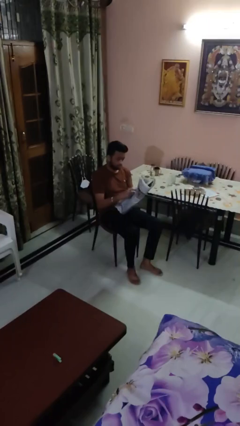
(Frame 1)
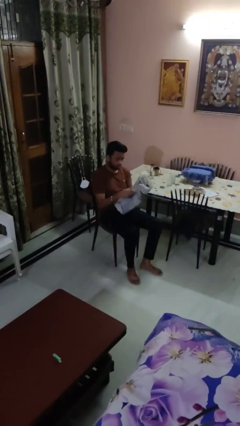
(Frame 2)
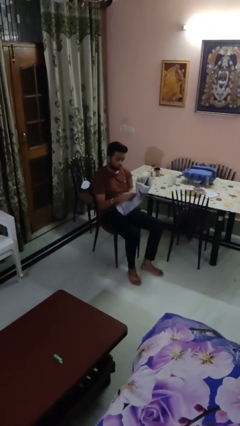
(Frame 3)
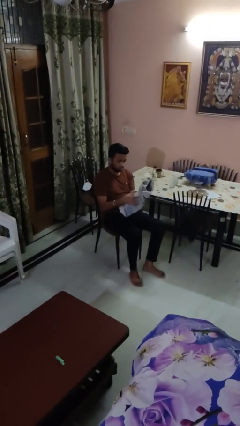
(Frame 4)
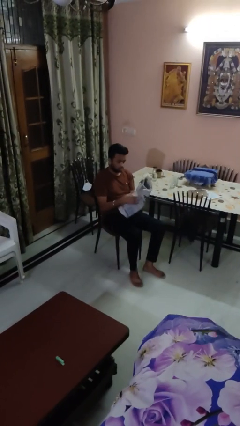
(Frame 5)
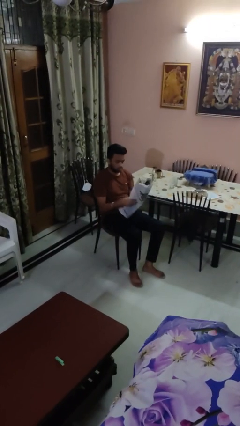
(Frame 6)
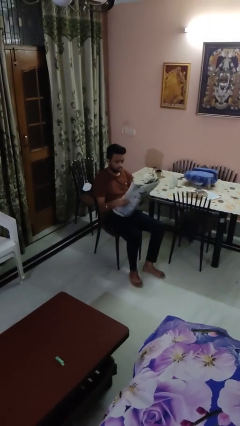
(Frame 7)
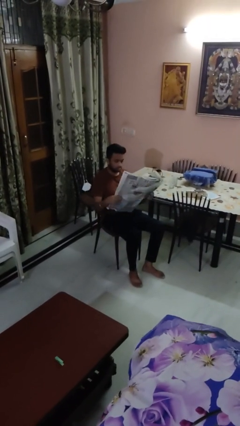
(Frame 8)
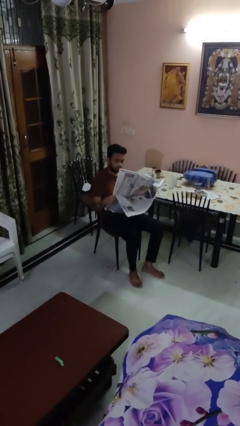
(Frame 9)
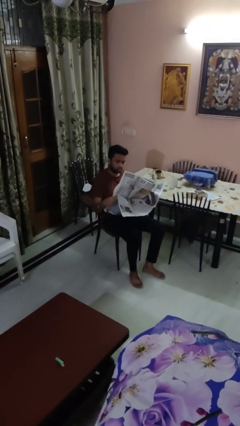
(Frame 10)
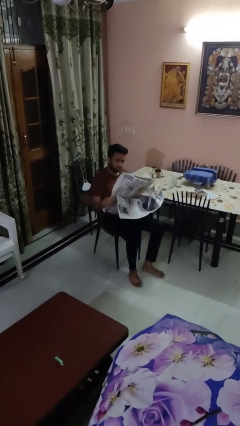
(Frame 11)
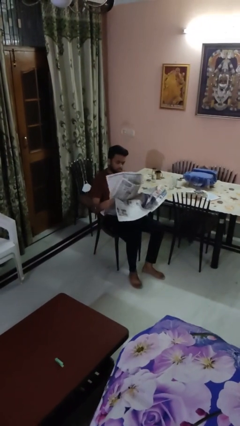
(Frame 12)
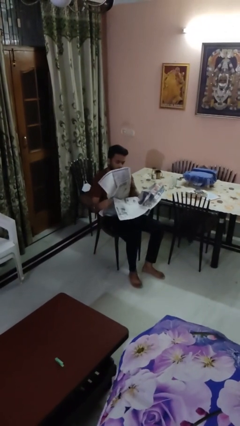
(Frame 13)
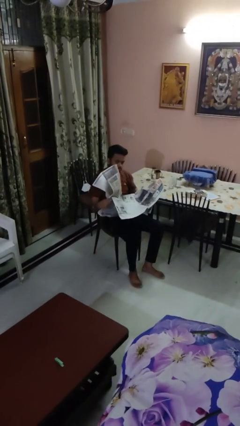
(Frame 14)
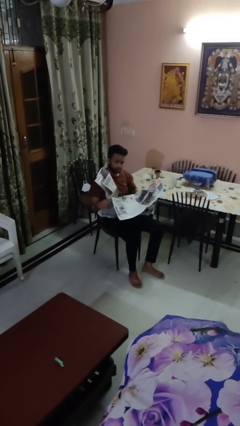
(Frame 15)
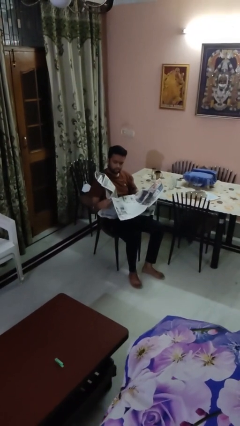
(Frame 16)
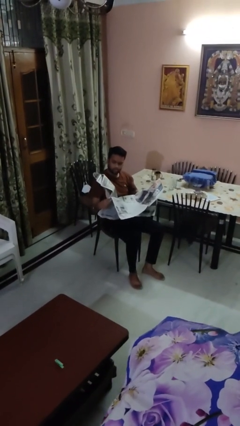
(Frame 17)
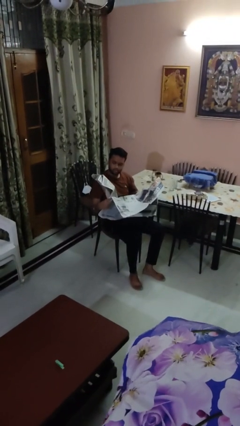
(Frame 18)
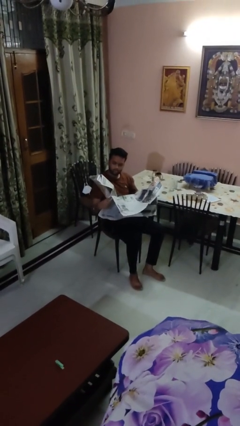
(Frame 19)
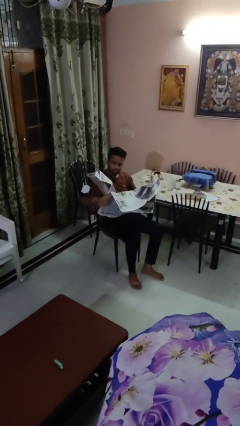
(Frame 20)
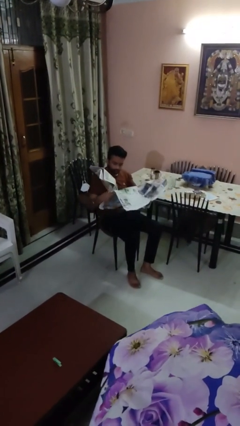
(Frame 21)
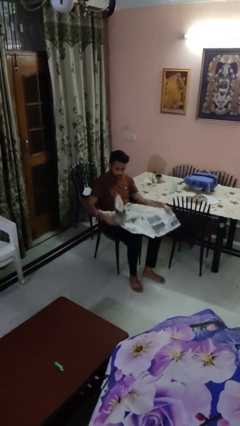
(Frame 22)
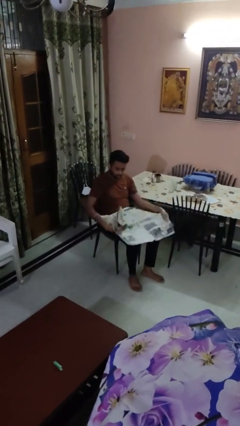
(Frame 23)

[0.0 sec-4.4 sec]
person reads newspaper

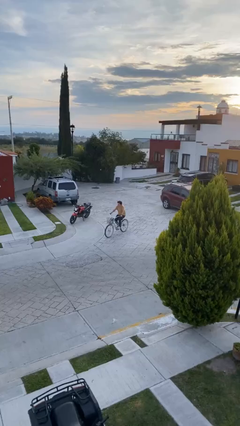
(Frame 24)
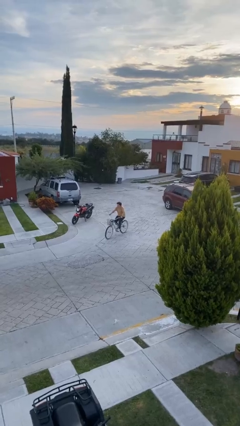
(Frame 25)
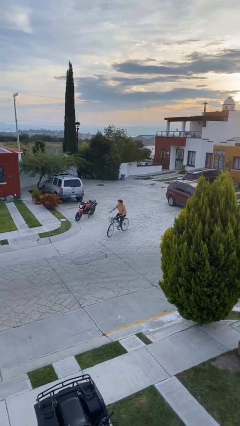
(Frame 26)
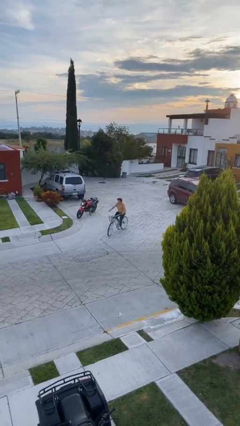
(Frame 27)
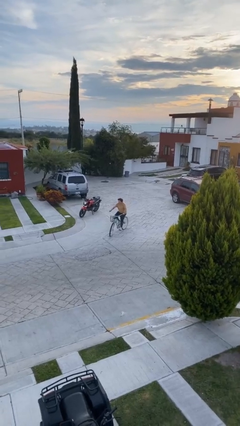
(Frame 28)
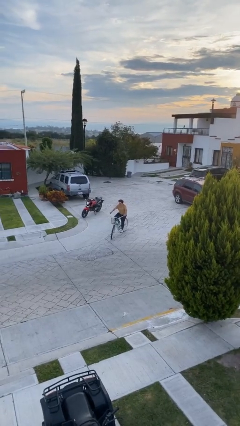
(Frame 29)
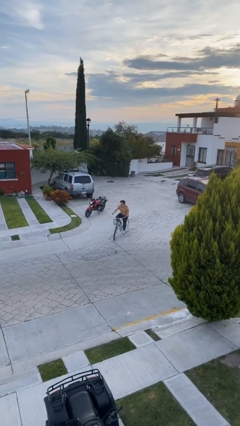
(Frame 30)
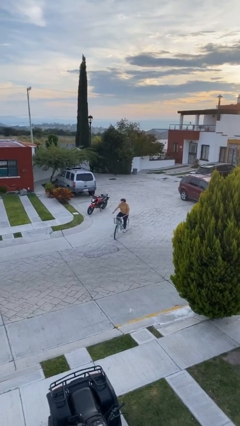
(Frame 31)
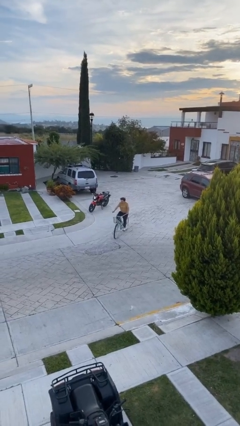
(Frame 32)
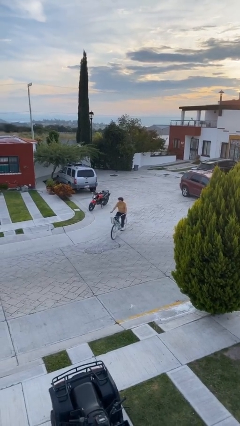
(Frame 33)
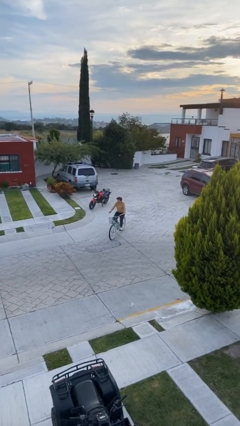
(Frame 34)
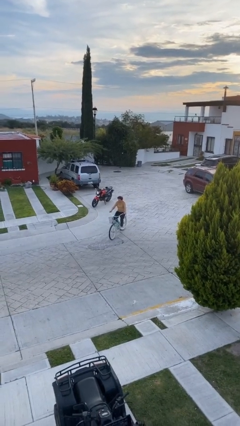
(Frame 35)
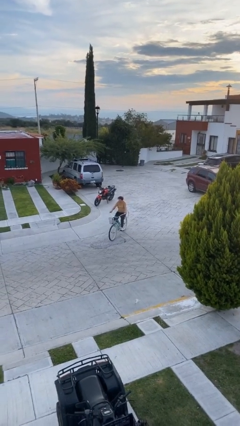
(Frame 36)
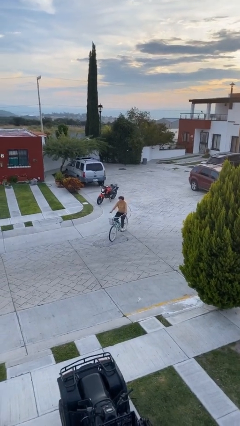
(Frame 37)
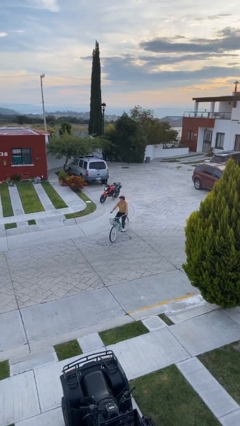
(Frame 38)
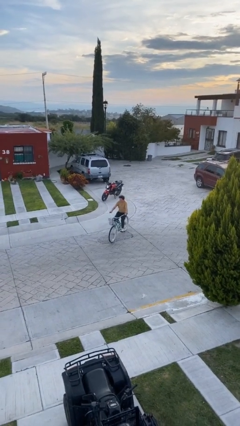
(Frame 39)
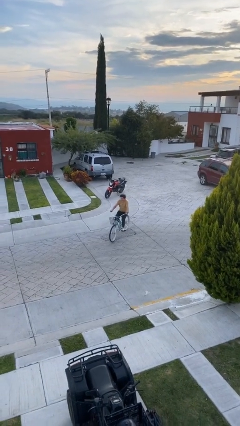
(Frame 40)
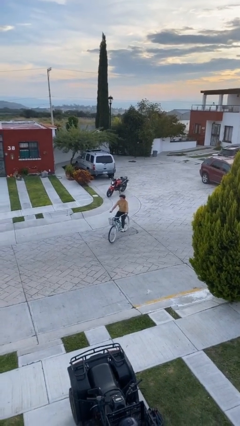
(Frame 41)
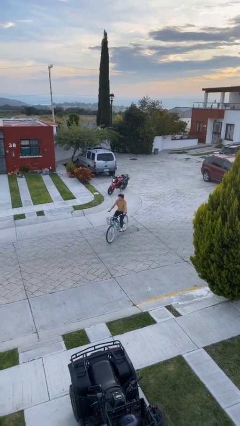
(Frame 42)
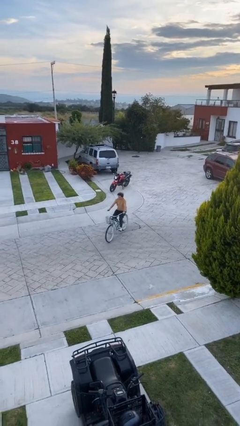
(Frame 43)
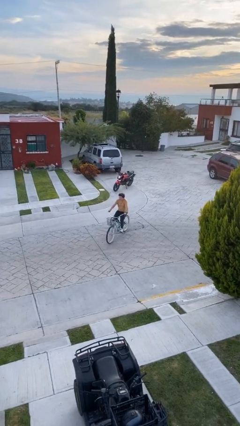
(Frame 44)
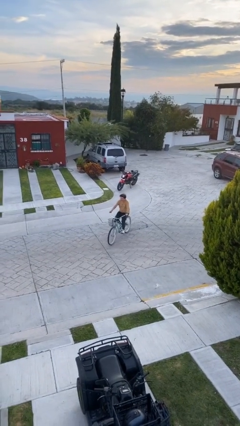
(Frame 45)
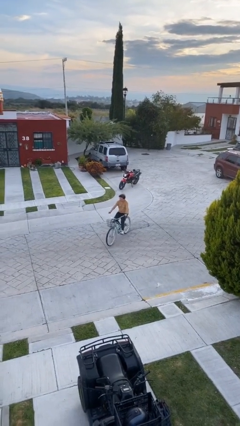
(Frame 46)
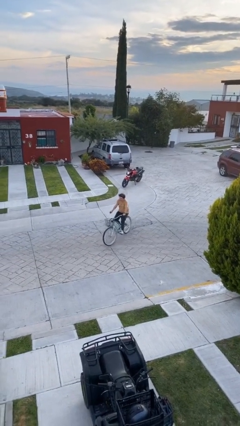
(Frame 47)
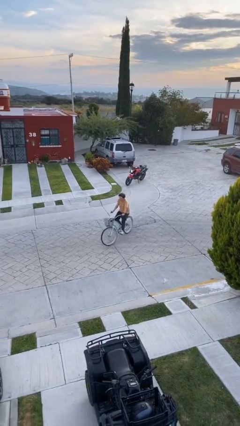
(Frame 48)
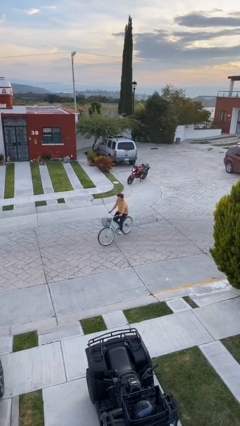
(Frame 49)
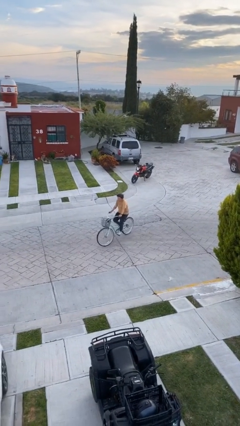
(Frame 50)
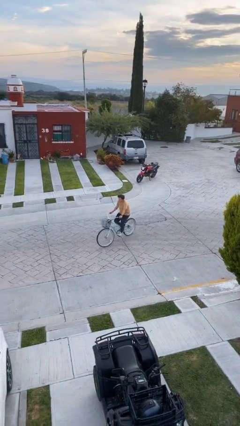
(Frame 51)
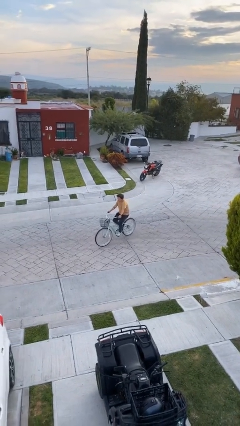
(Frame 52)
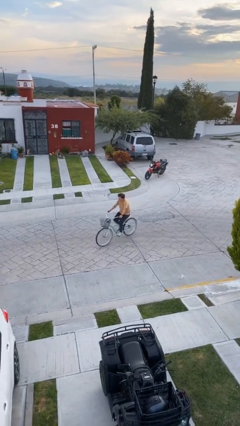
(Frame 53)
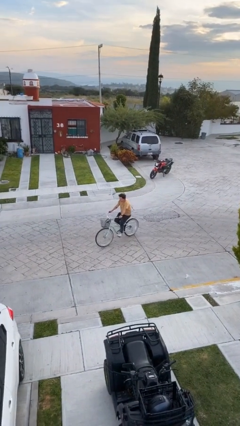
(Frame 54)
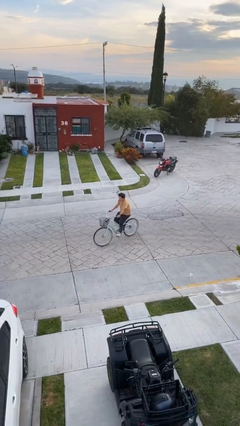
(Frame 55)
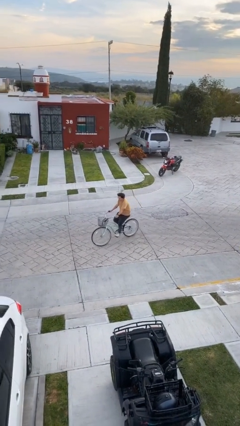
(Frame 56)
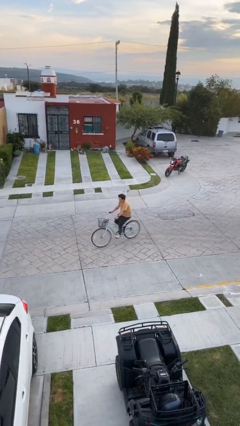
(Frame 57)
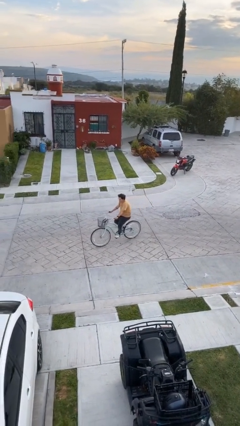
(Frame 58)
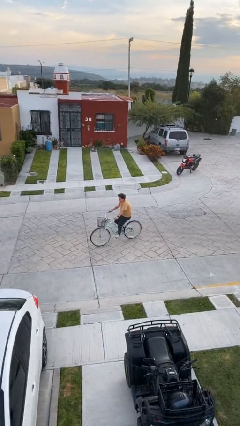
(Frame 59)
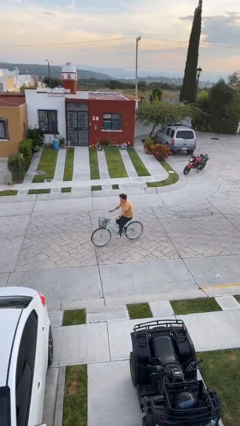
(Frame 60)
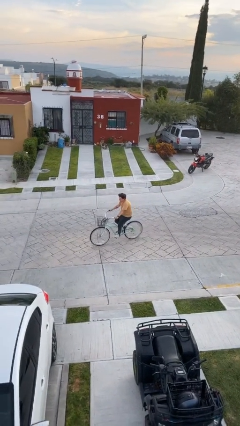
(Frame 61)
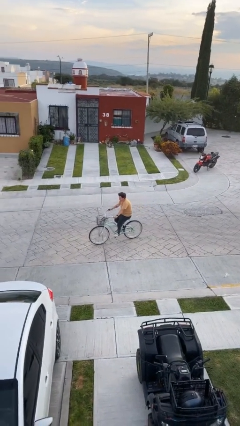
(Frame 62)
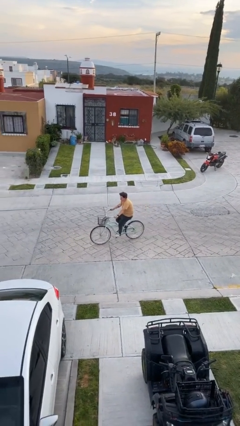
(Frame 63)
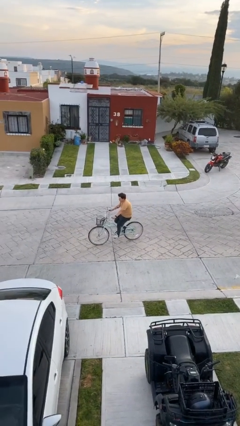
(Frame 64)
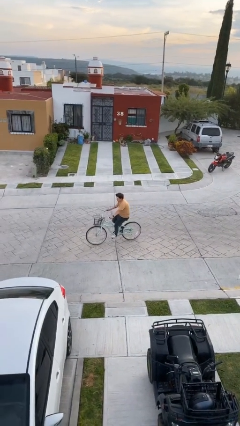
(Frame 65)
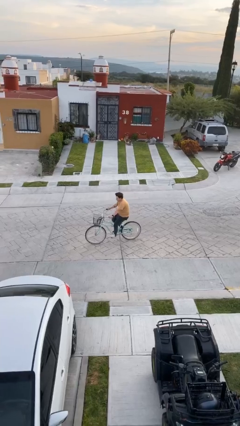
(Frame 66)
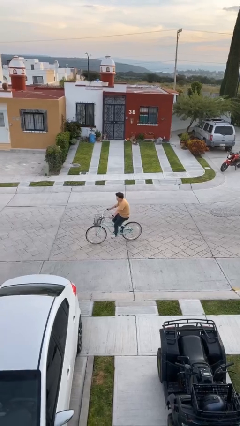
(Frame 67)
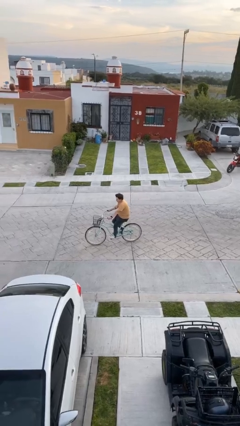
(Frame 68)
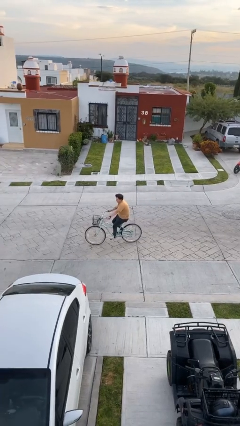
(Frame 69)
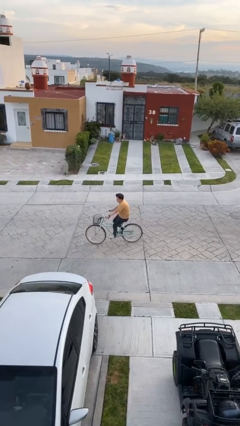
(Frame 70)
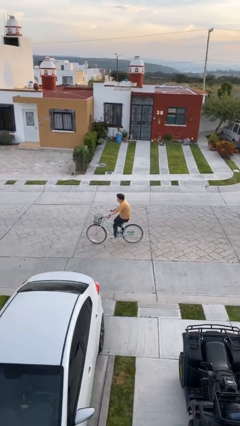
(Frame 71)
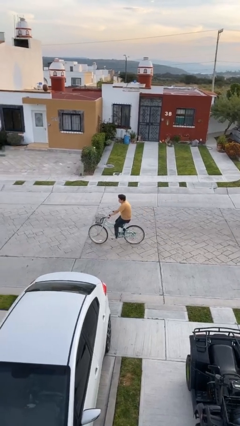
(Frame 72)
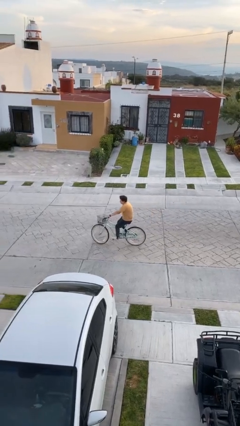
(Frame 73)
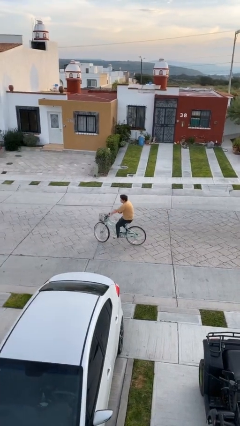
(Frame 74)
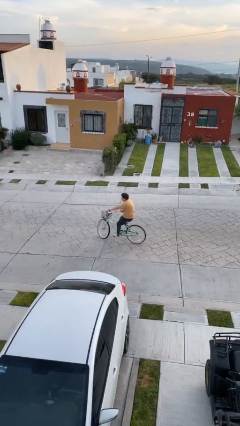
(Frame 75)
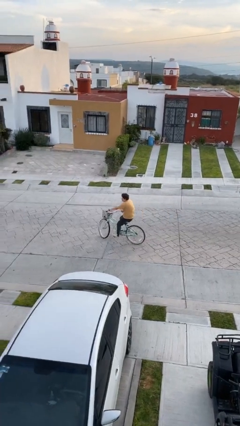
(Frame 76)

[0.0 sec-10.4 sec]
person rides bicycle

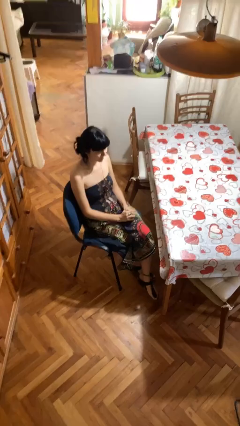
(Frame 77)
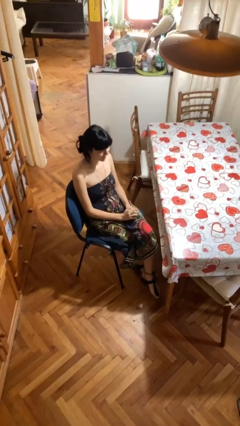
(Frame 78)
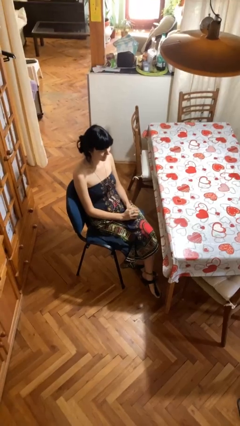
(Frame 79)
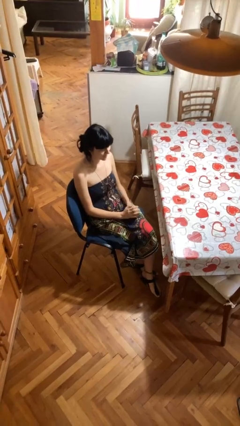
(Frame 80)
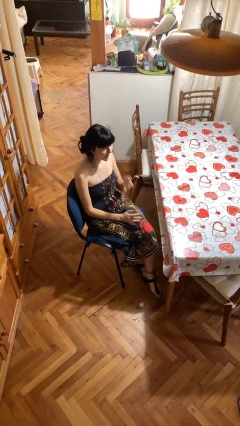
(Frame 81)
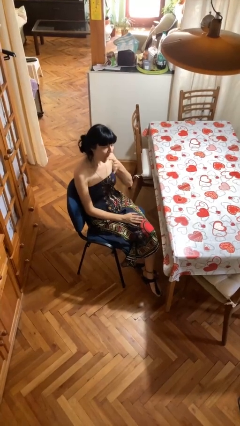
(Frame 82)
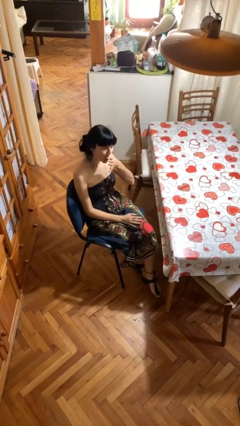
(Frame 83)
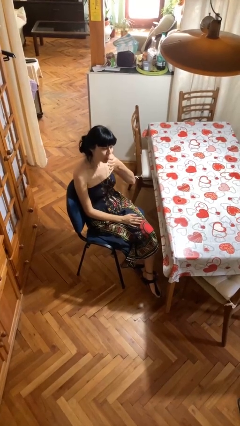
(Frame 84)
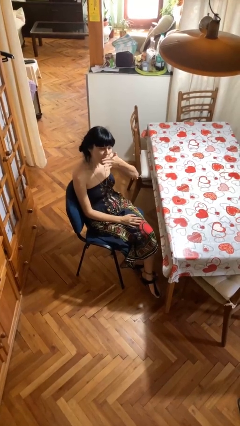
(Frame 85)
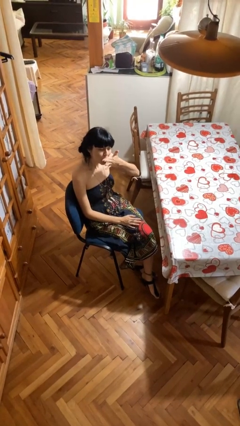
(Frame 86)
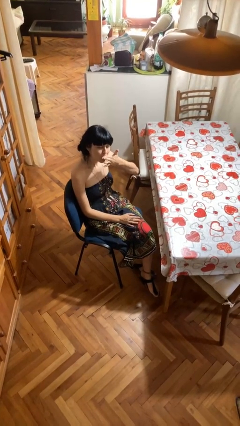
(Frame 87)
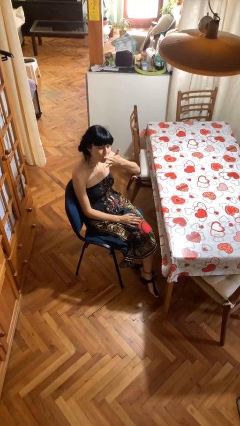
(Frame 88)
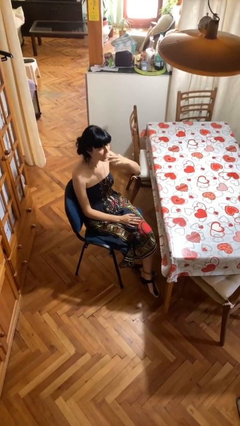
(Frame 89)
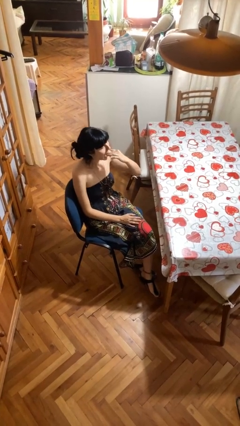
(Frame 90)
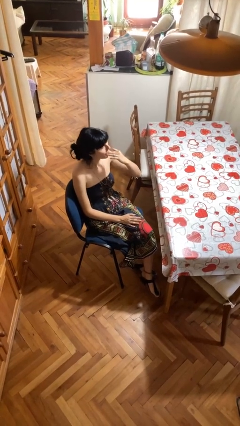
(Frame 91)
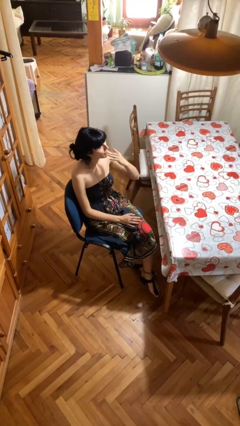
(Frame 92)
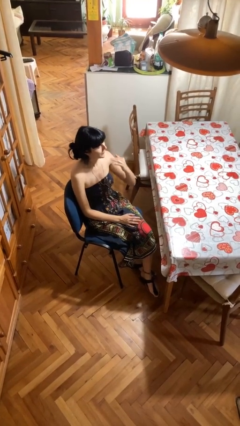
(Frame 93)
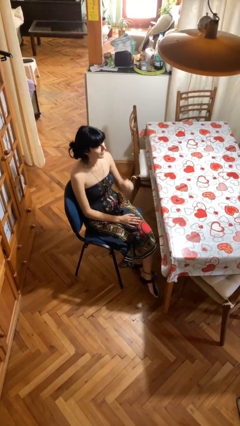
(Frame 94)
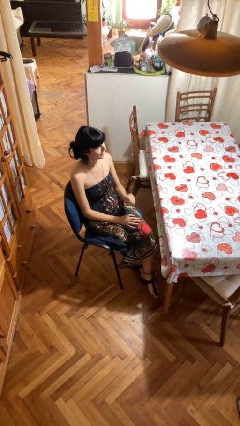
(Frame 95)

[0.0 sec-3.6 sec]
person licks fingers
